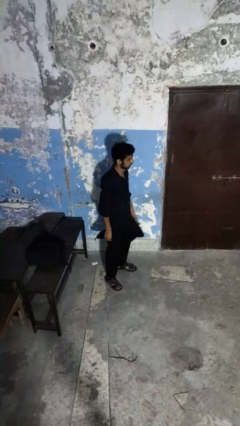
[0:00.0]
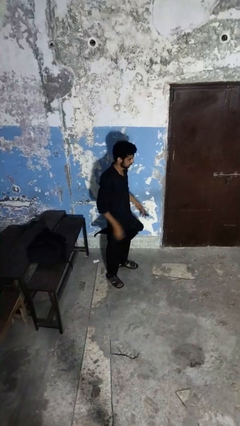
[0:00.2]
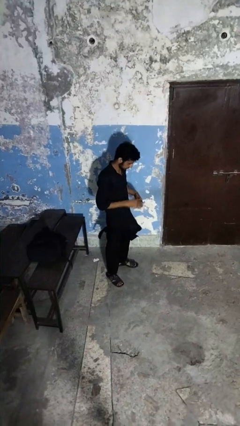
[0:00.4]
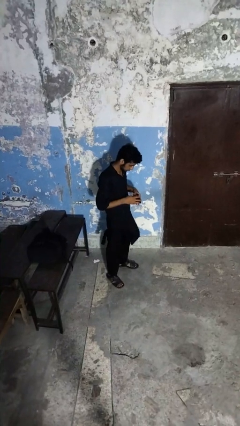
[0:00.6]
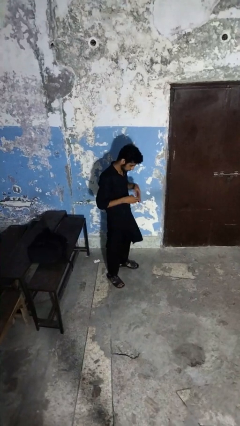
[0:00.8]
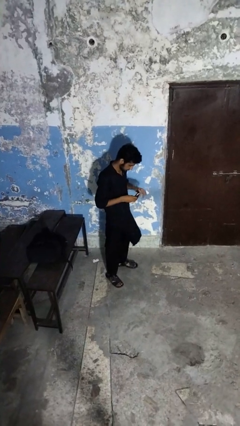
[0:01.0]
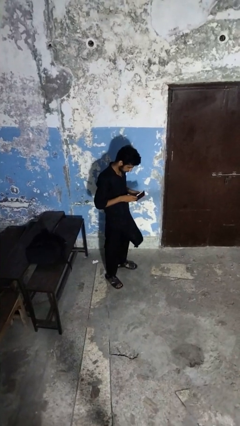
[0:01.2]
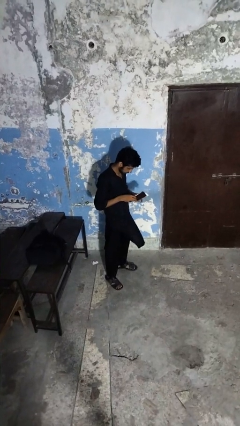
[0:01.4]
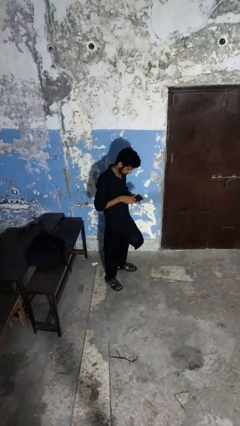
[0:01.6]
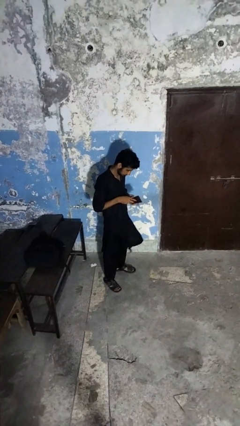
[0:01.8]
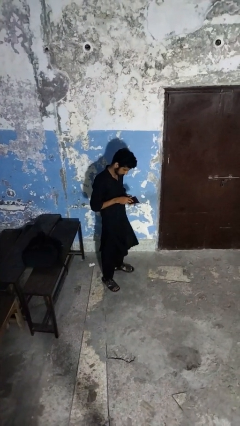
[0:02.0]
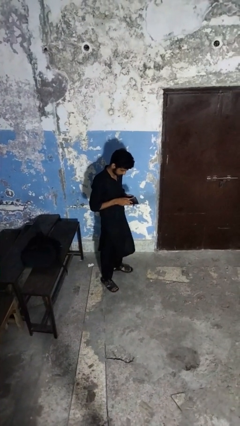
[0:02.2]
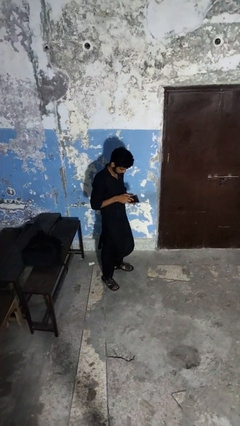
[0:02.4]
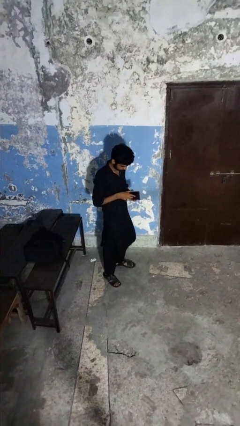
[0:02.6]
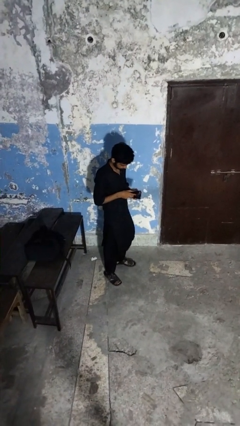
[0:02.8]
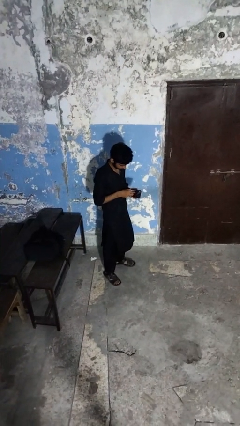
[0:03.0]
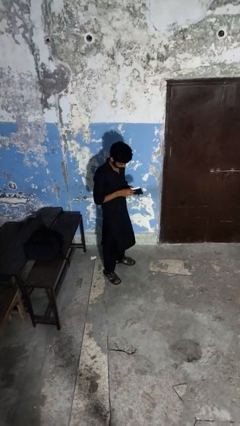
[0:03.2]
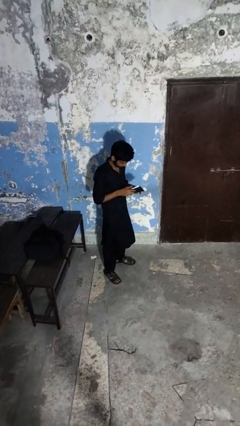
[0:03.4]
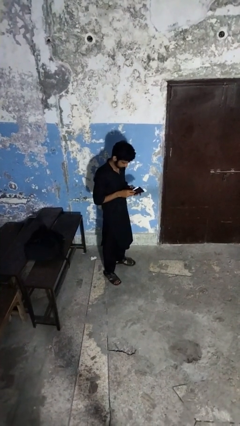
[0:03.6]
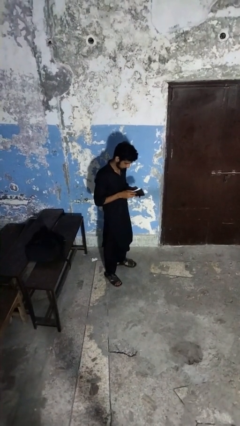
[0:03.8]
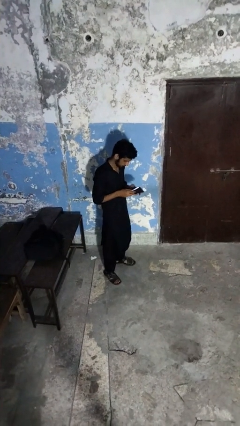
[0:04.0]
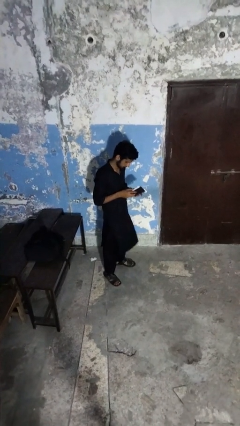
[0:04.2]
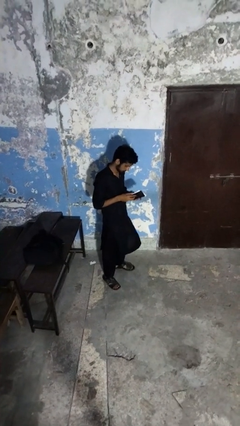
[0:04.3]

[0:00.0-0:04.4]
person searches in purse

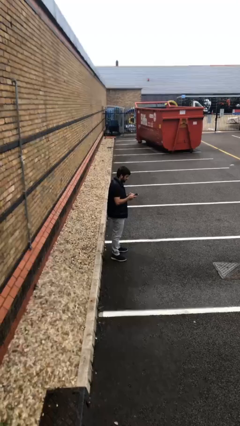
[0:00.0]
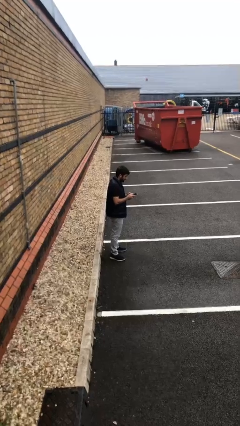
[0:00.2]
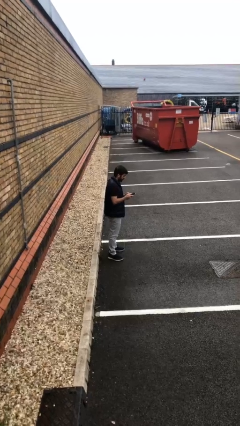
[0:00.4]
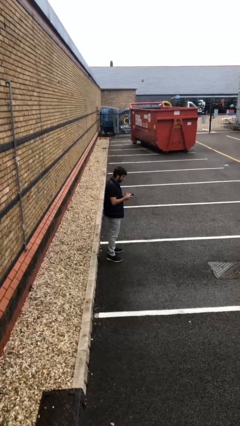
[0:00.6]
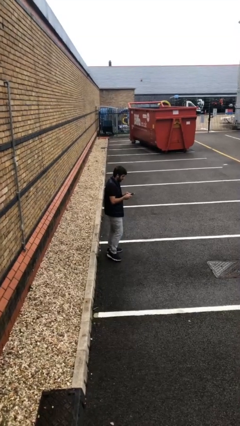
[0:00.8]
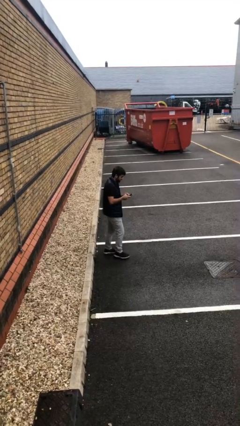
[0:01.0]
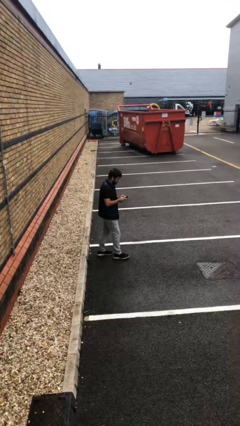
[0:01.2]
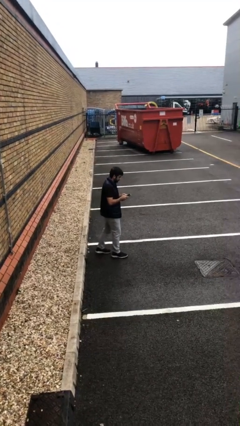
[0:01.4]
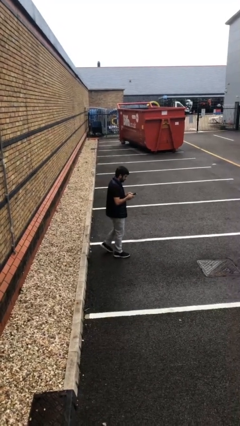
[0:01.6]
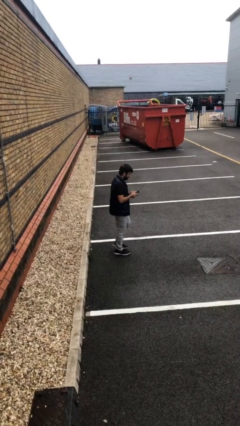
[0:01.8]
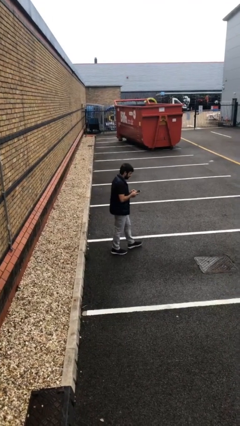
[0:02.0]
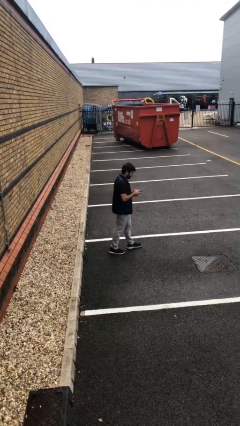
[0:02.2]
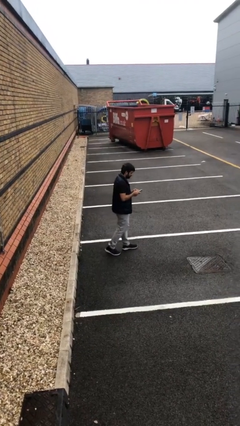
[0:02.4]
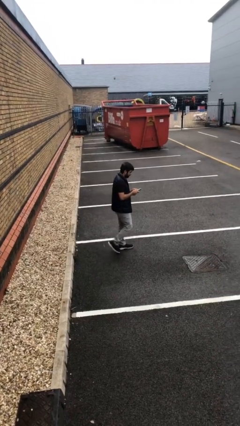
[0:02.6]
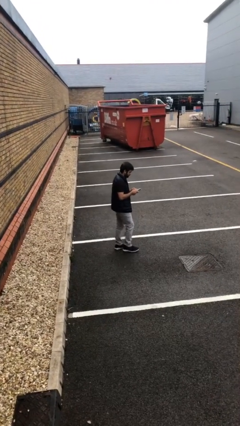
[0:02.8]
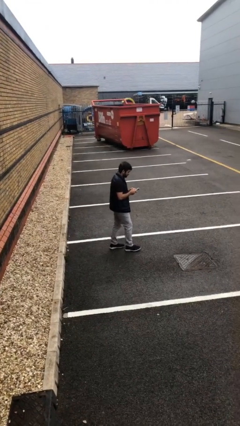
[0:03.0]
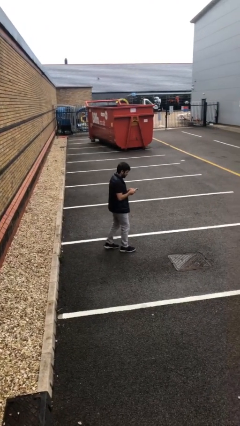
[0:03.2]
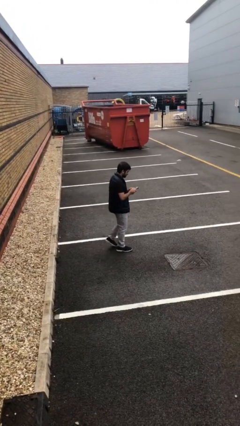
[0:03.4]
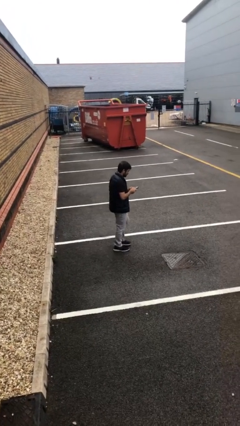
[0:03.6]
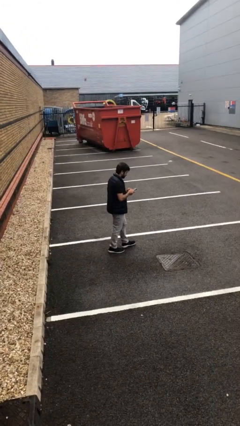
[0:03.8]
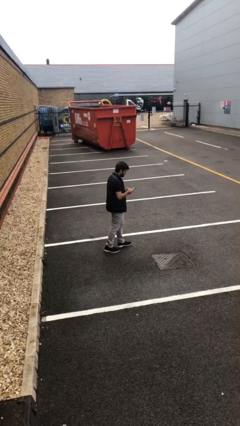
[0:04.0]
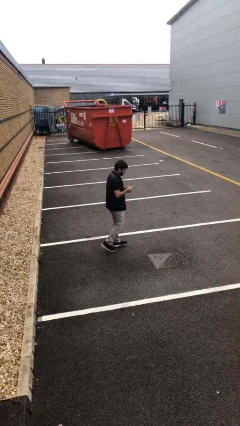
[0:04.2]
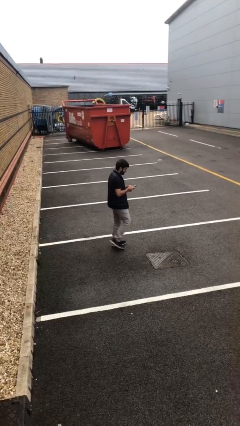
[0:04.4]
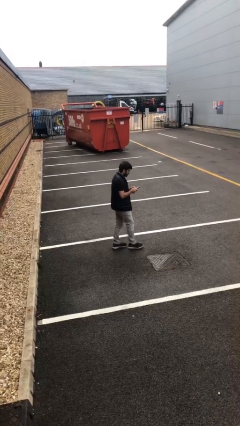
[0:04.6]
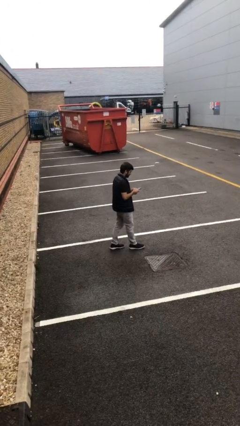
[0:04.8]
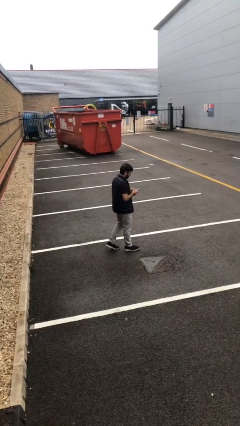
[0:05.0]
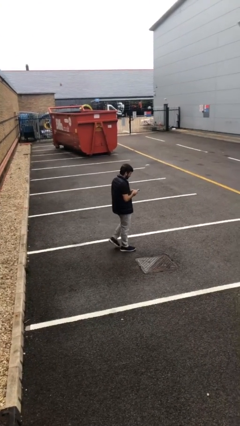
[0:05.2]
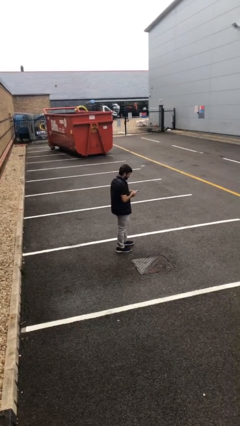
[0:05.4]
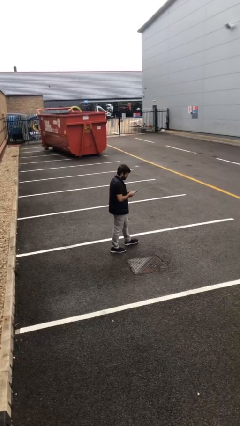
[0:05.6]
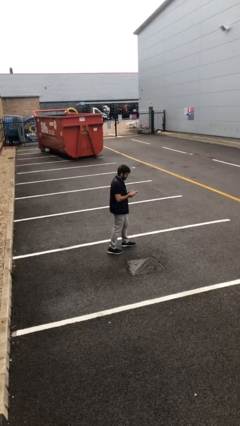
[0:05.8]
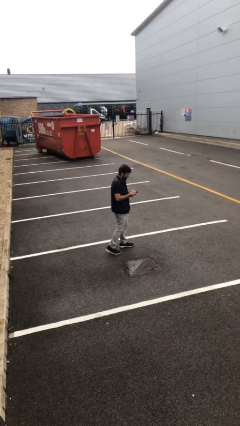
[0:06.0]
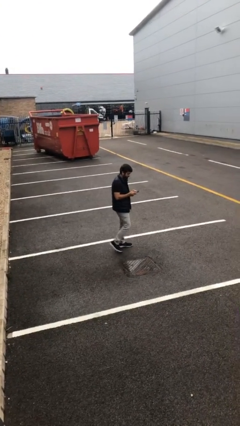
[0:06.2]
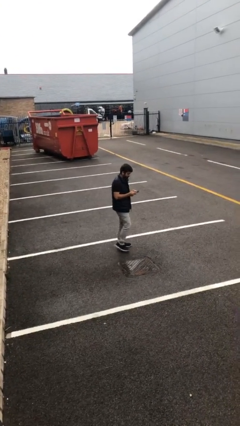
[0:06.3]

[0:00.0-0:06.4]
person texts on phone

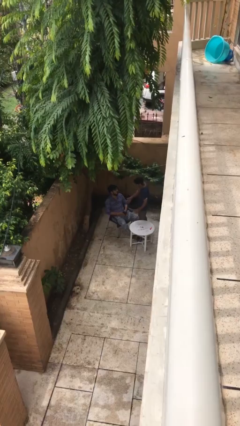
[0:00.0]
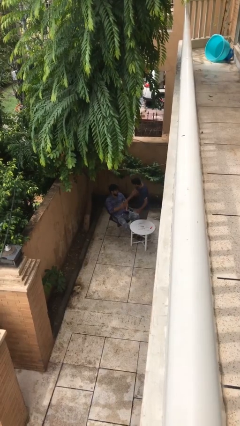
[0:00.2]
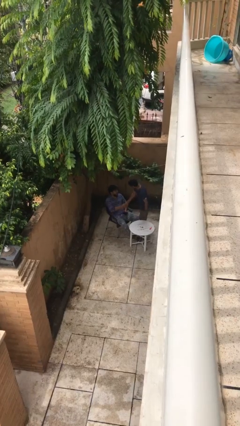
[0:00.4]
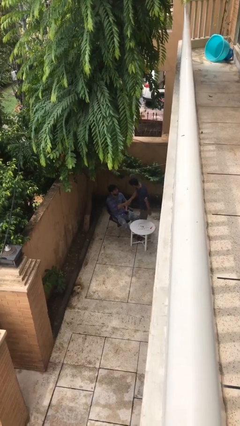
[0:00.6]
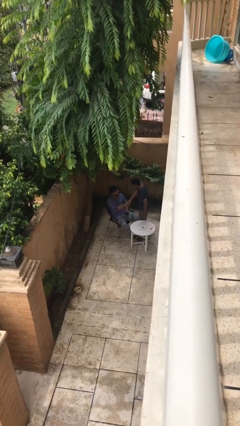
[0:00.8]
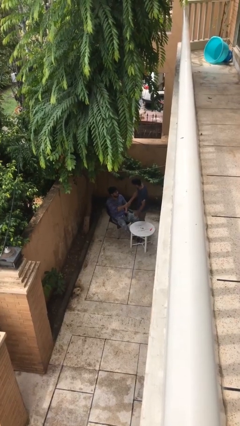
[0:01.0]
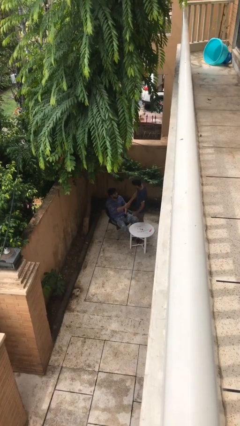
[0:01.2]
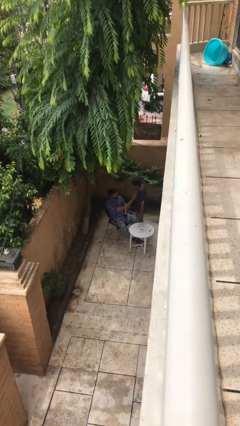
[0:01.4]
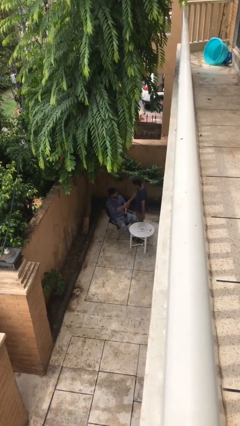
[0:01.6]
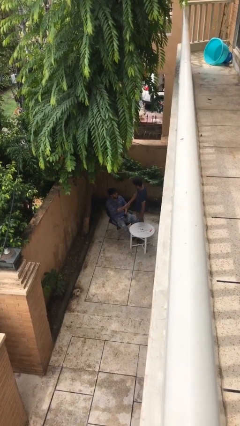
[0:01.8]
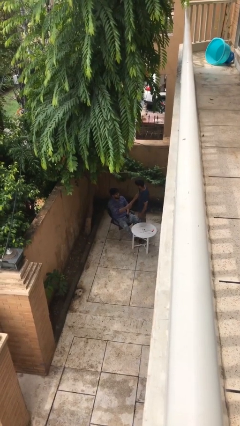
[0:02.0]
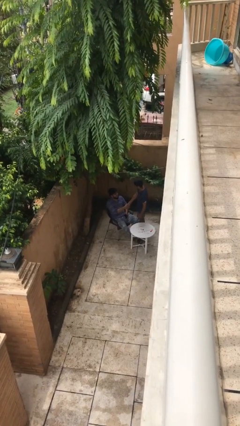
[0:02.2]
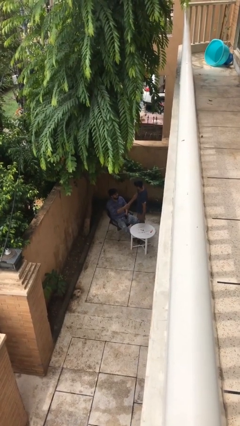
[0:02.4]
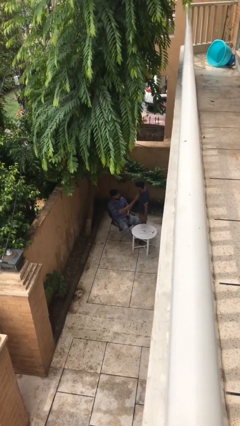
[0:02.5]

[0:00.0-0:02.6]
person shakes hand

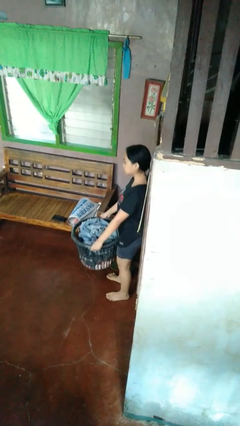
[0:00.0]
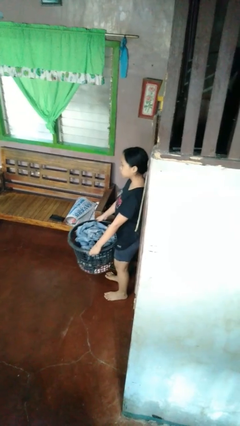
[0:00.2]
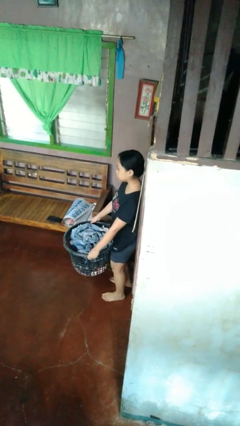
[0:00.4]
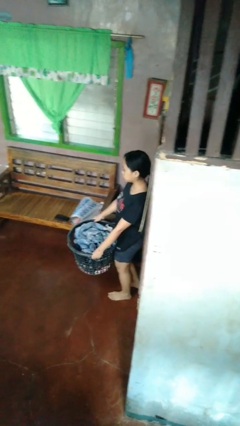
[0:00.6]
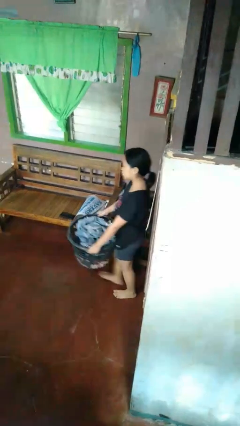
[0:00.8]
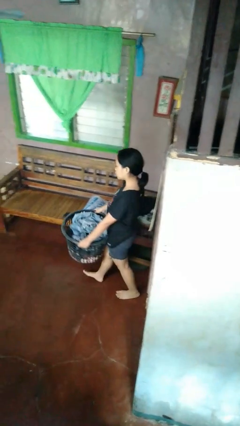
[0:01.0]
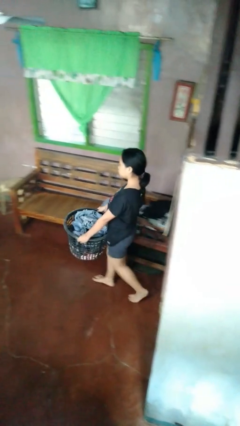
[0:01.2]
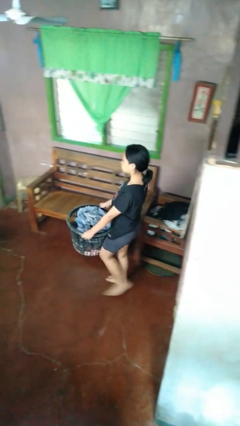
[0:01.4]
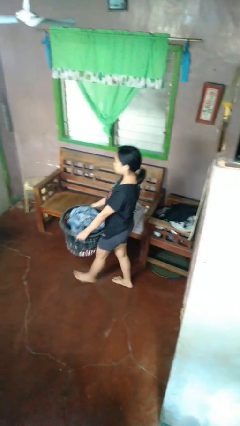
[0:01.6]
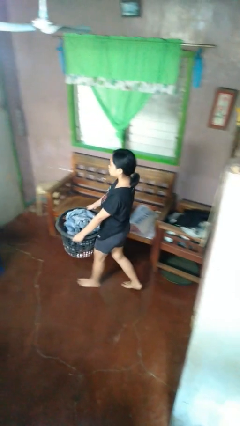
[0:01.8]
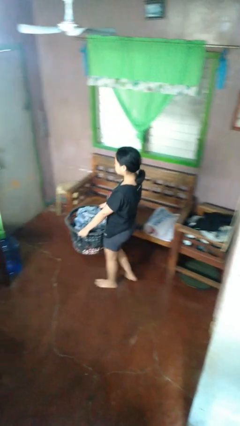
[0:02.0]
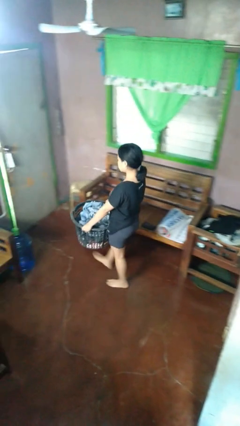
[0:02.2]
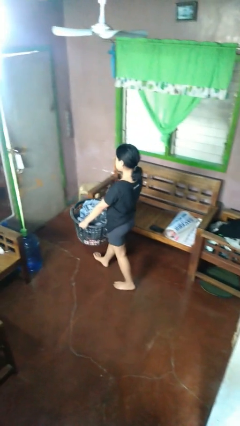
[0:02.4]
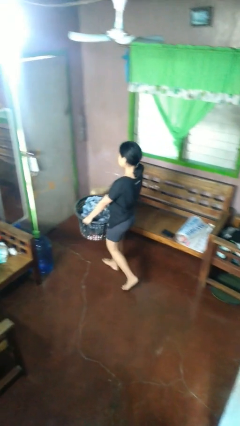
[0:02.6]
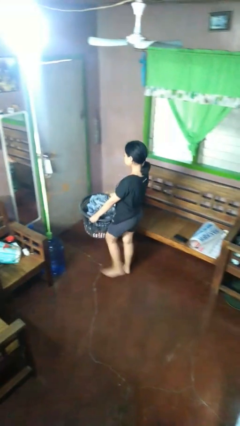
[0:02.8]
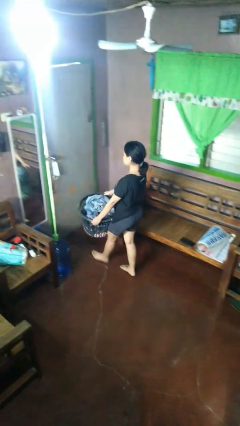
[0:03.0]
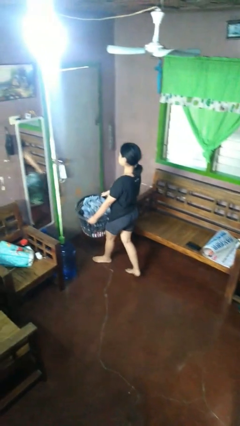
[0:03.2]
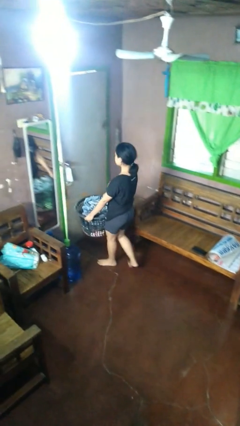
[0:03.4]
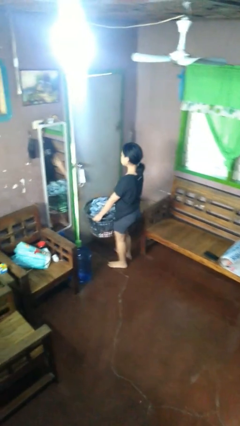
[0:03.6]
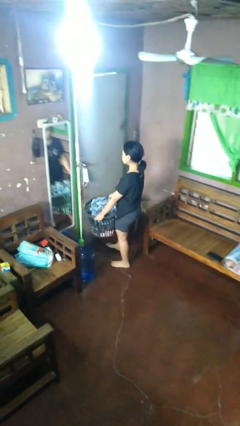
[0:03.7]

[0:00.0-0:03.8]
person carries laundry basket

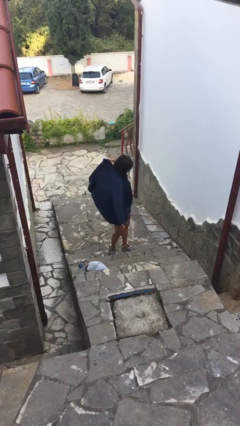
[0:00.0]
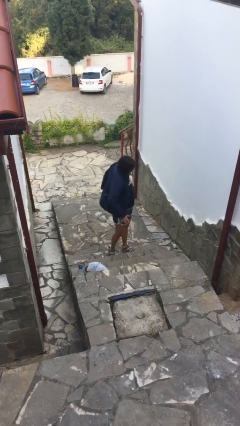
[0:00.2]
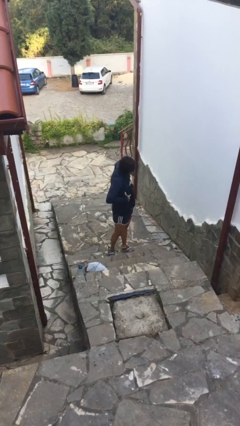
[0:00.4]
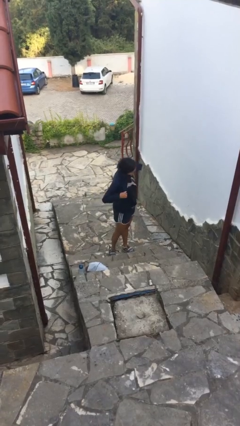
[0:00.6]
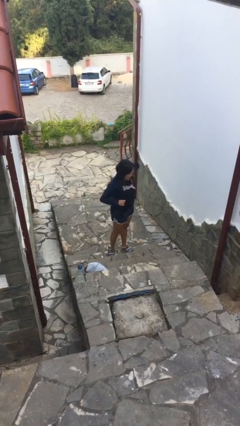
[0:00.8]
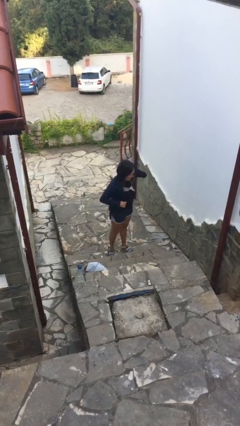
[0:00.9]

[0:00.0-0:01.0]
person puts on jacket
